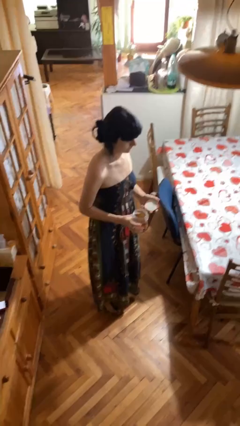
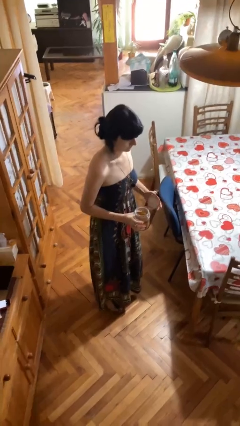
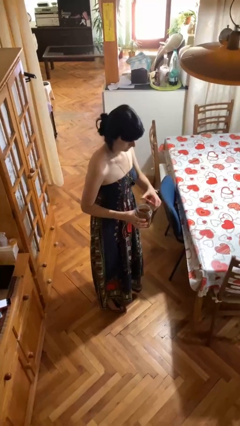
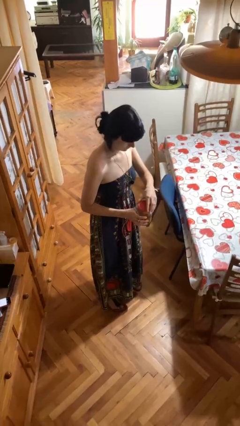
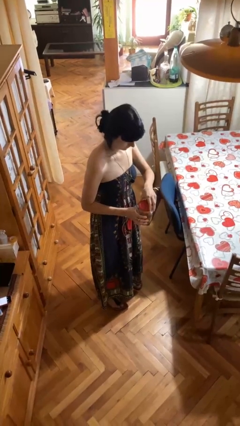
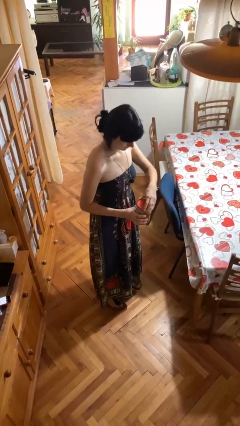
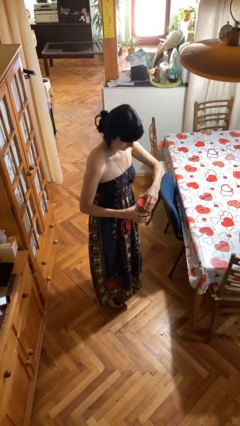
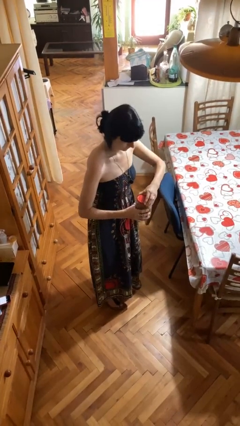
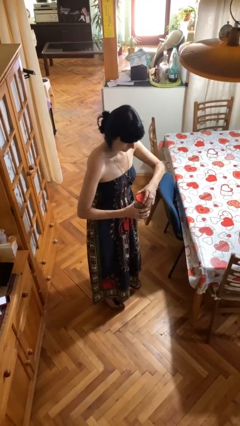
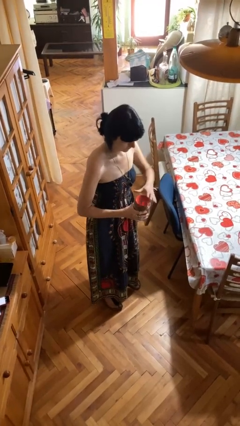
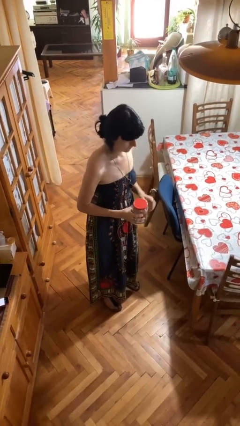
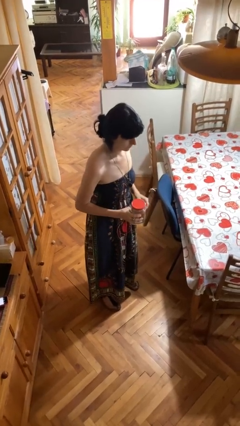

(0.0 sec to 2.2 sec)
person closes jar

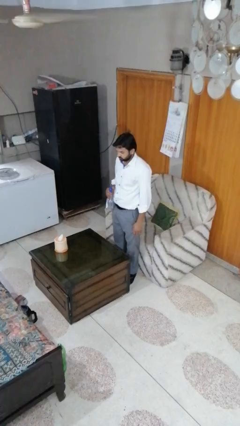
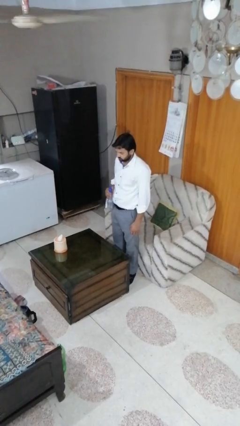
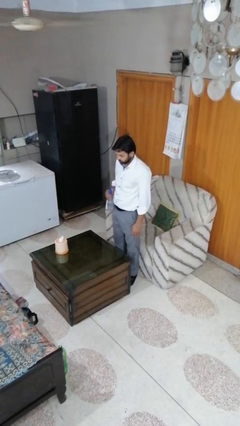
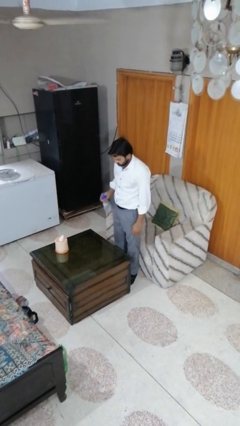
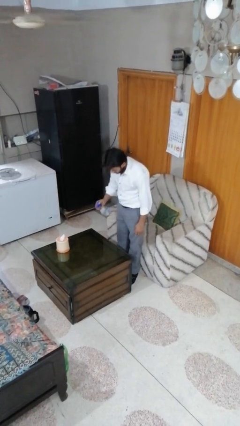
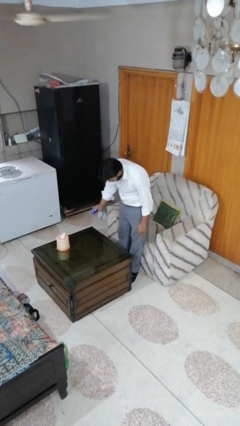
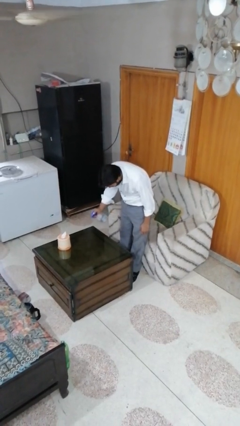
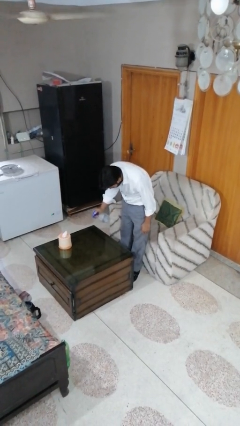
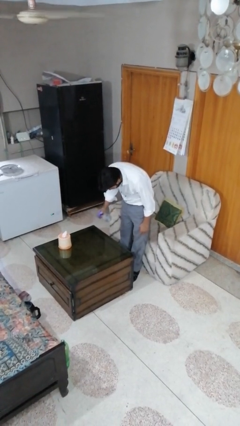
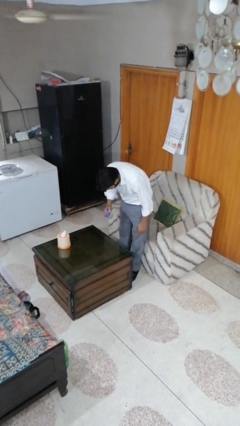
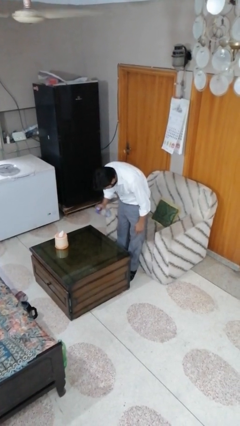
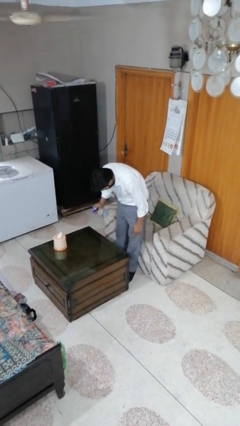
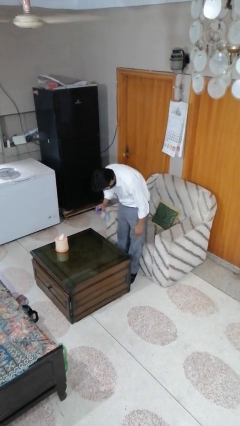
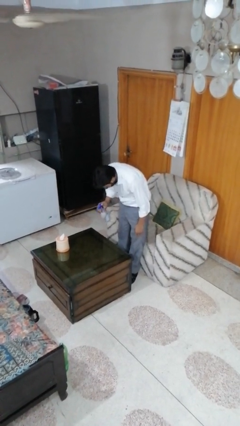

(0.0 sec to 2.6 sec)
person sprays from bottle

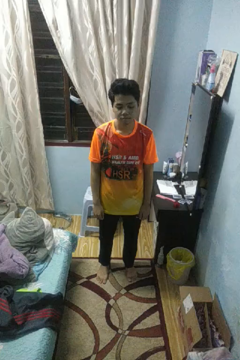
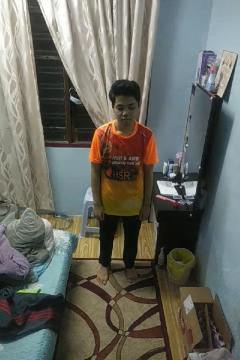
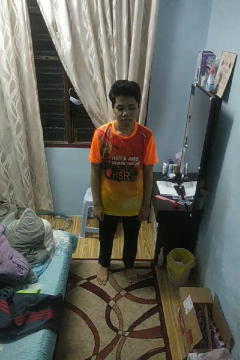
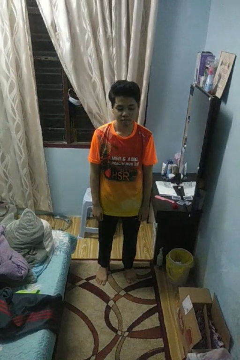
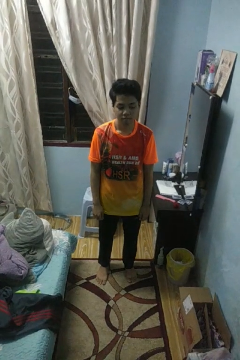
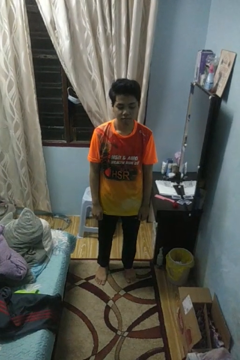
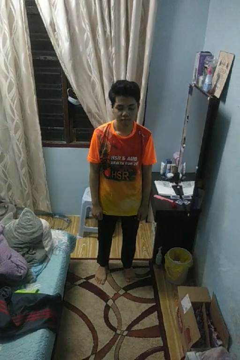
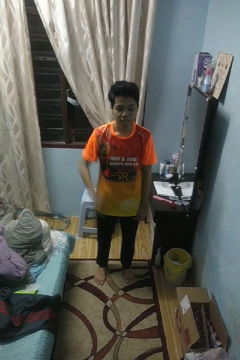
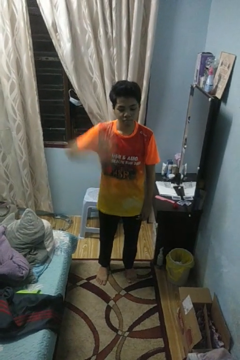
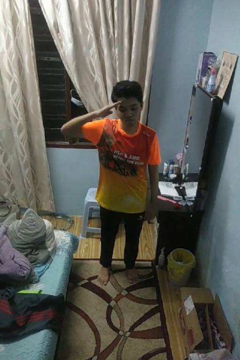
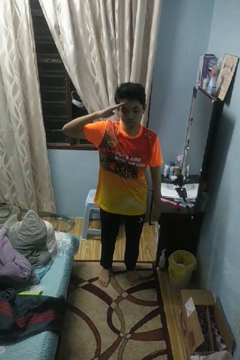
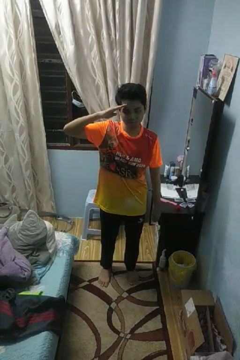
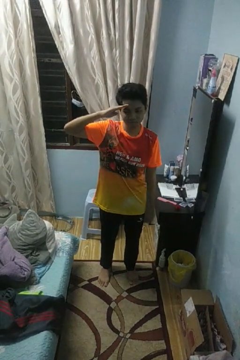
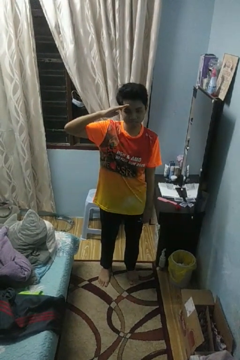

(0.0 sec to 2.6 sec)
person salutes

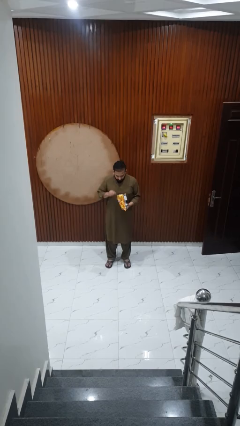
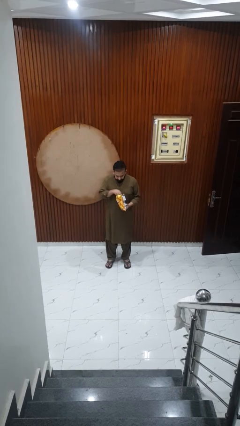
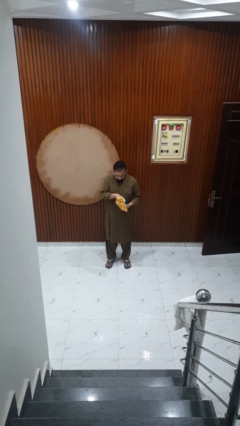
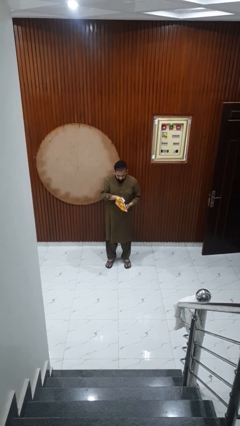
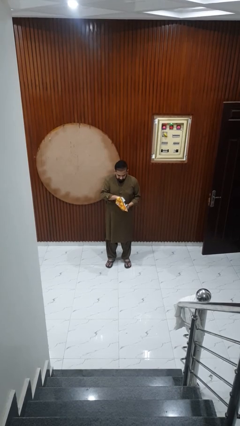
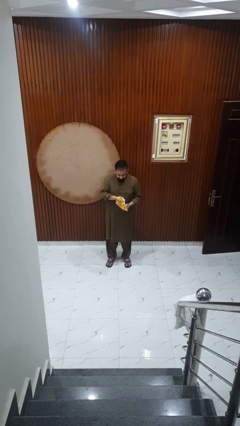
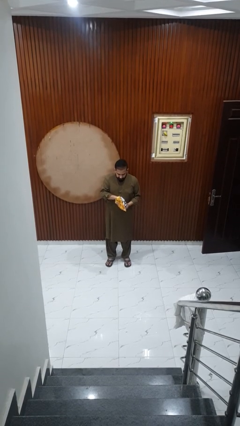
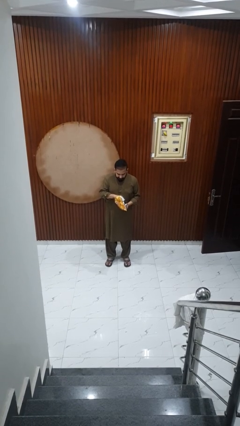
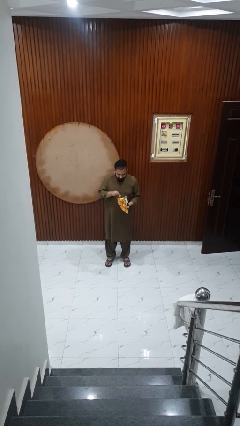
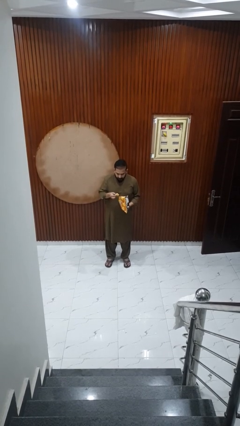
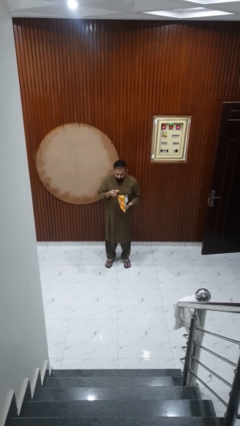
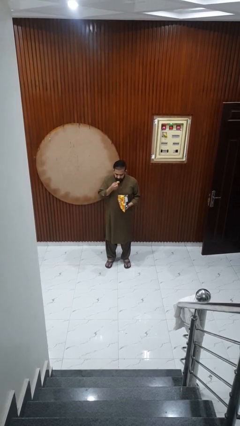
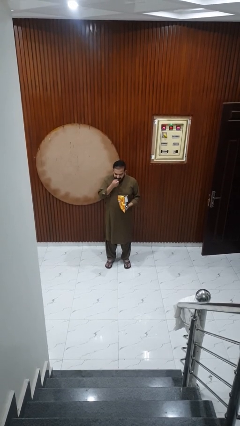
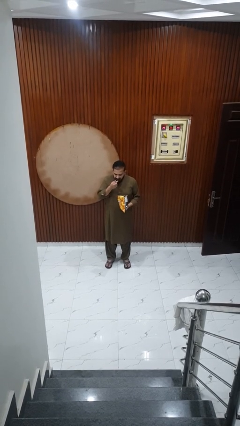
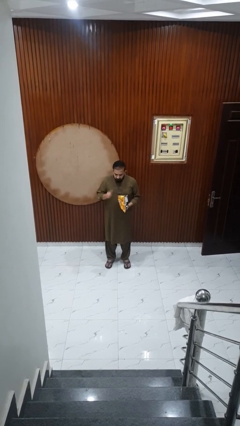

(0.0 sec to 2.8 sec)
person eats snack from bag

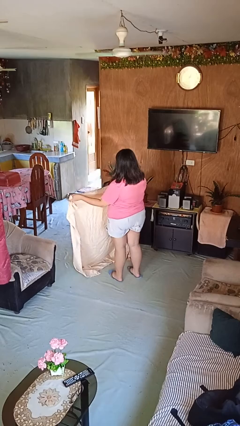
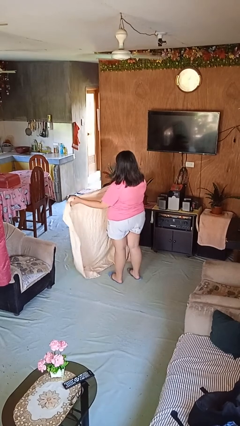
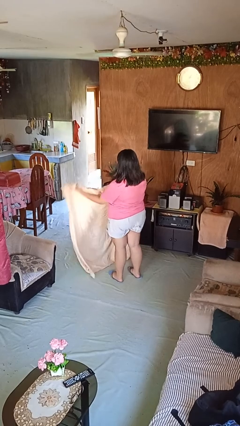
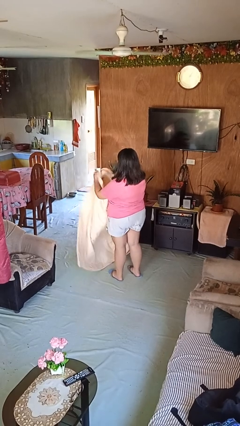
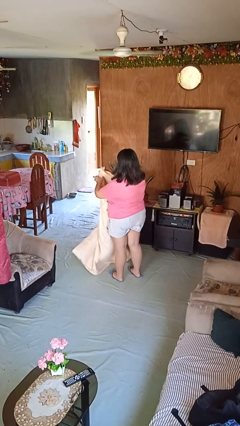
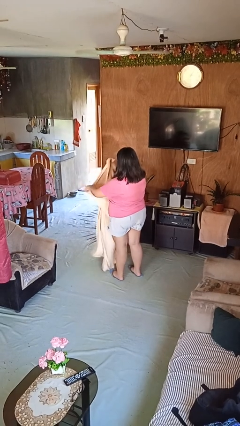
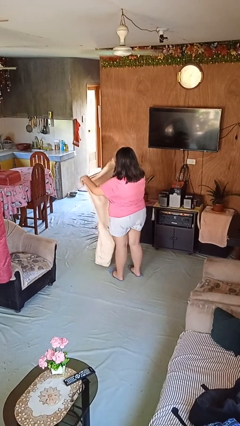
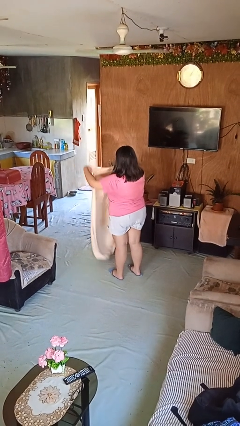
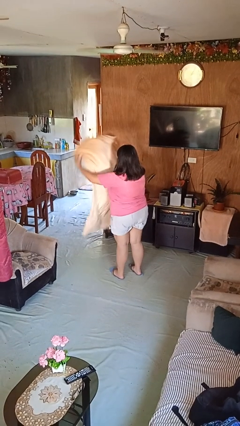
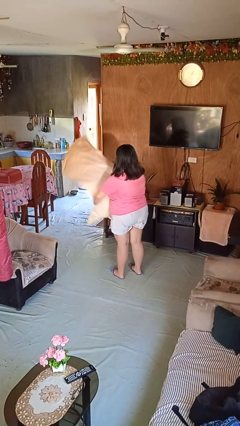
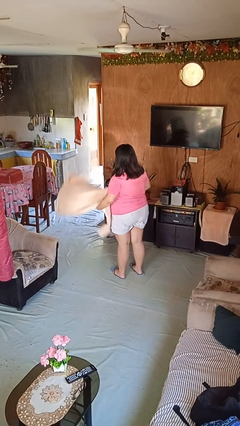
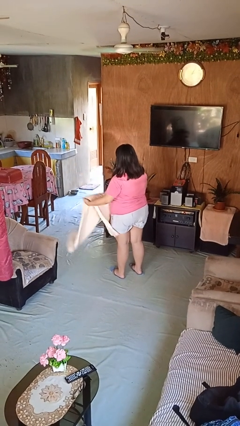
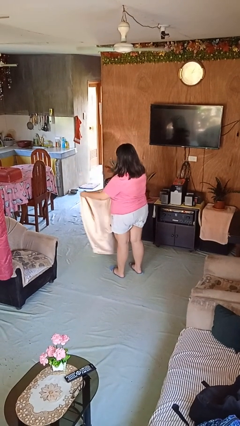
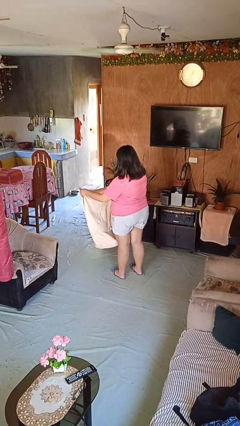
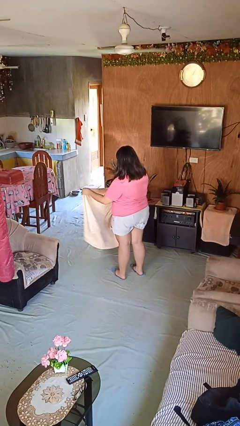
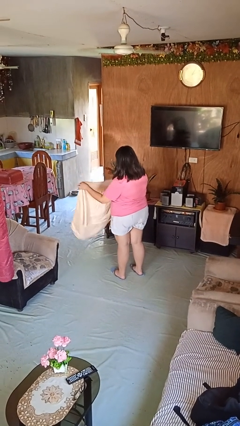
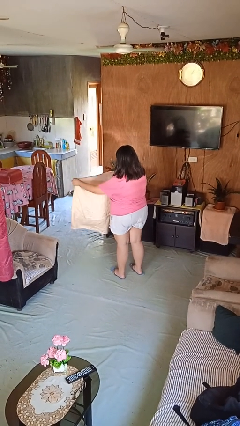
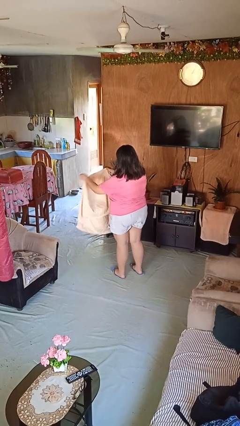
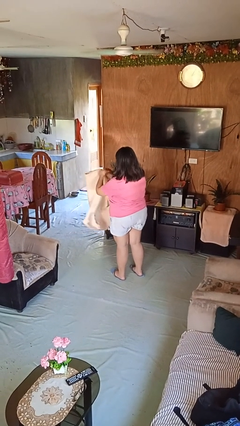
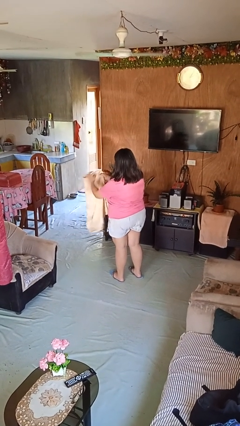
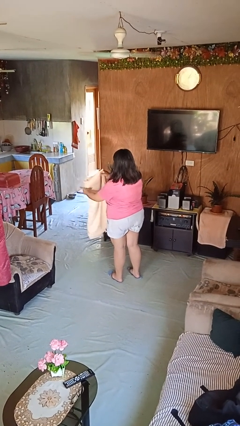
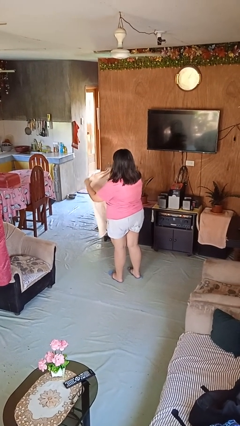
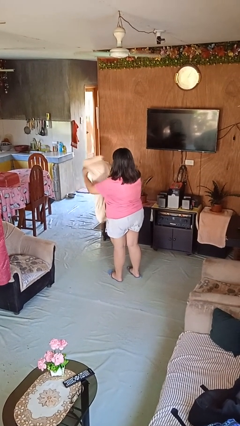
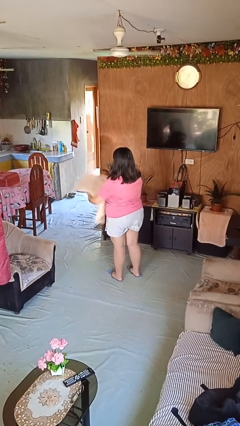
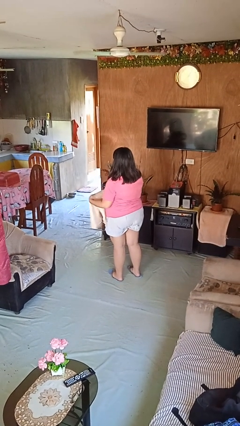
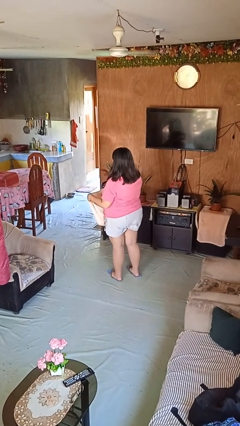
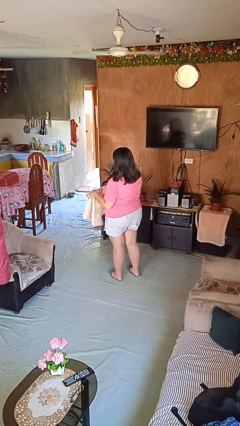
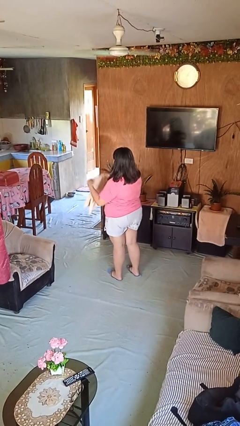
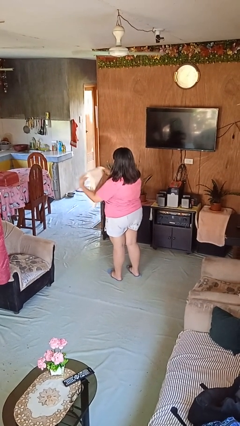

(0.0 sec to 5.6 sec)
person folds blanket

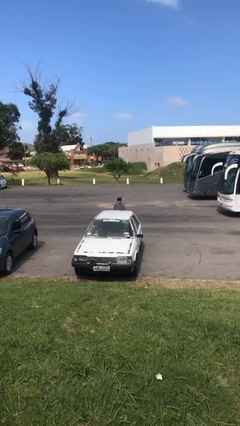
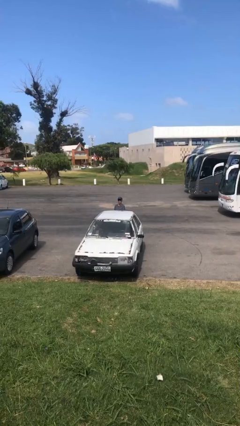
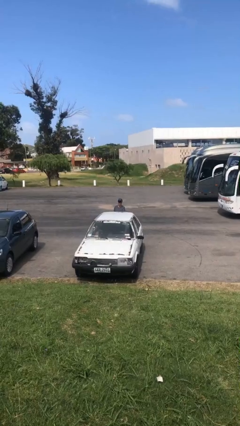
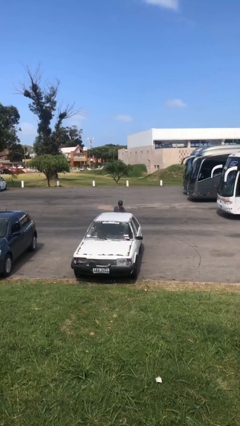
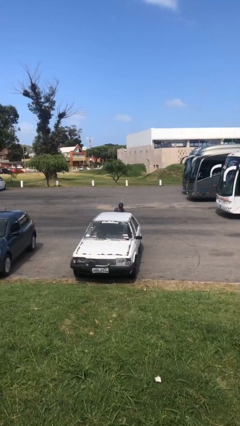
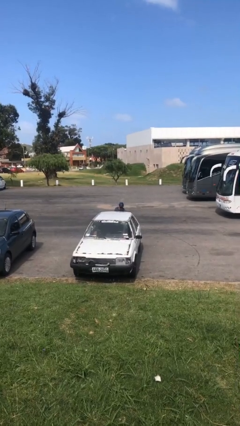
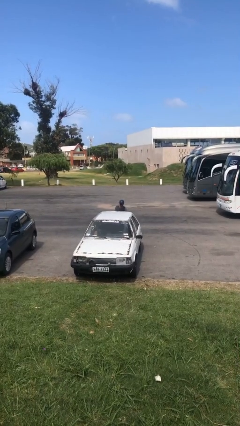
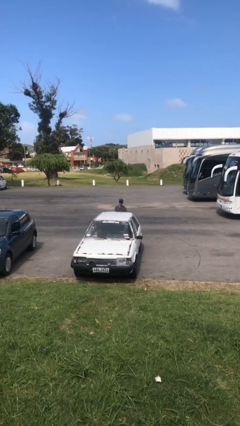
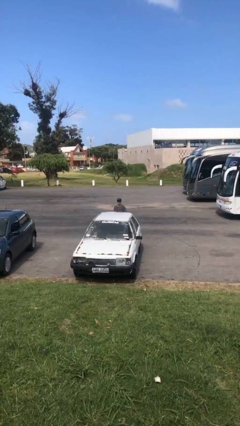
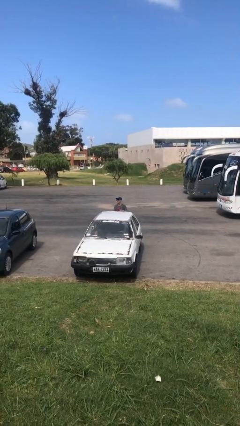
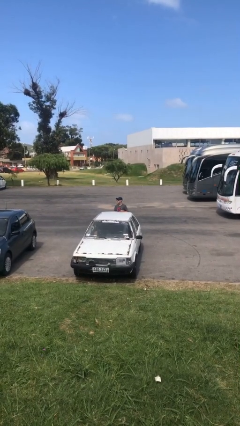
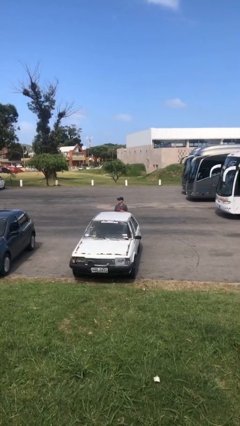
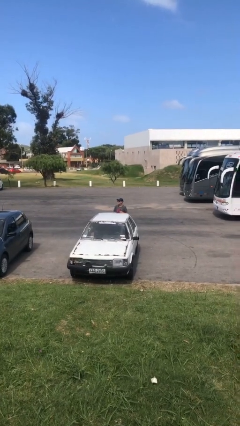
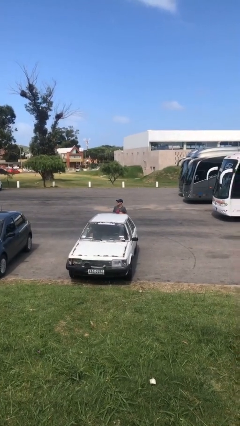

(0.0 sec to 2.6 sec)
person unloads car
